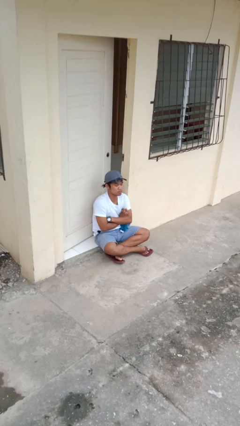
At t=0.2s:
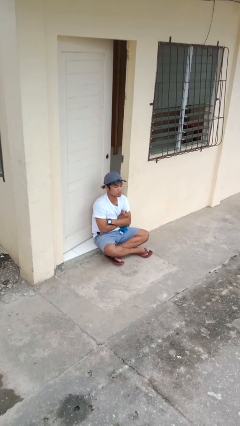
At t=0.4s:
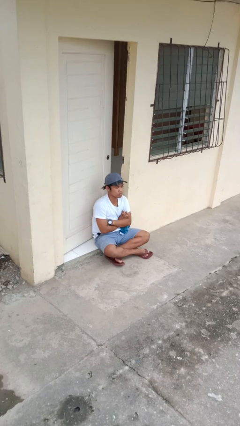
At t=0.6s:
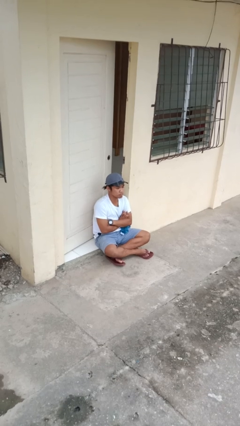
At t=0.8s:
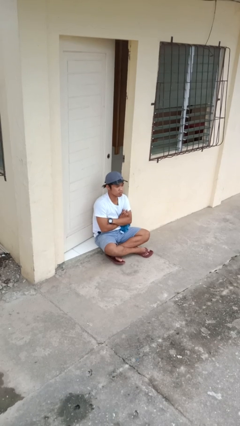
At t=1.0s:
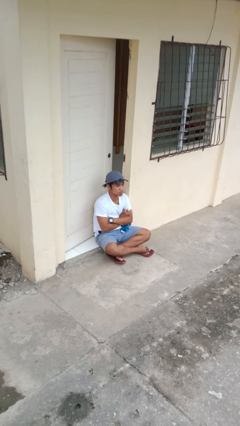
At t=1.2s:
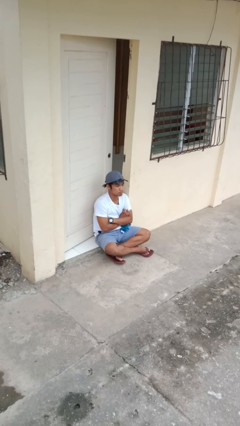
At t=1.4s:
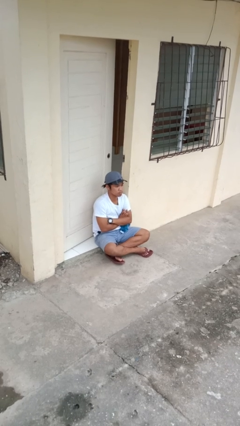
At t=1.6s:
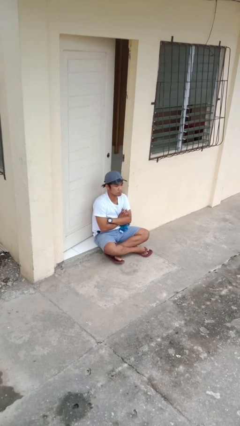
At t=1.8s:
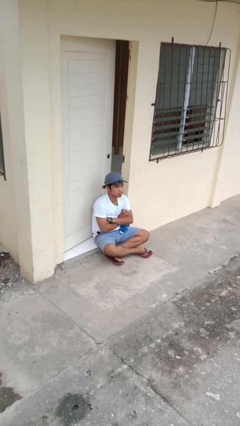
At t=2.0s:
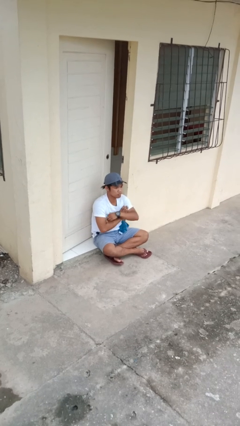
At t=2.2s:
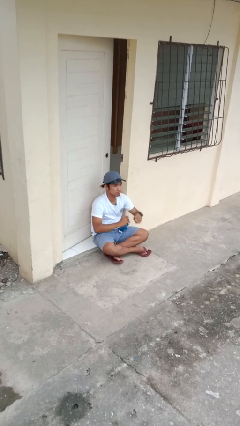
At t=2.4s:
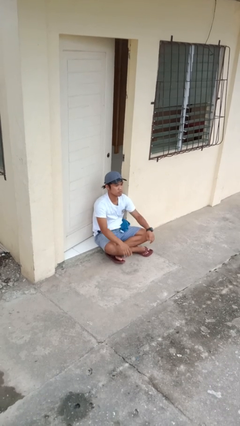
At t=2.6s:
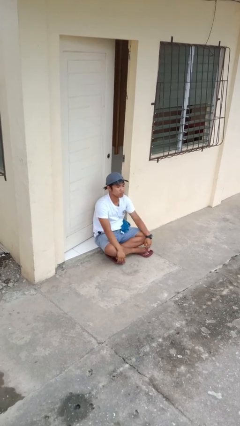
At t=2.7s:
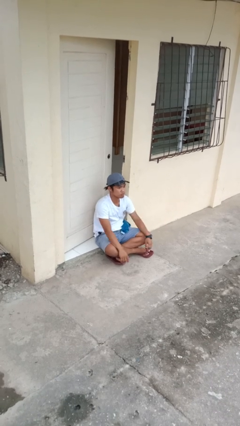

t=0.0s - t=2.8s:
person crosses arms

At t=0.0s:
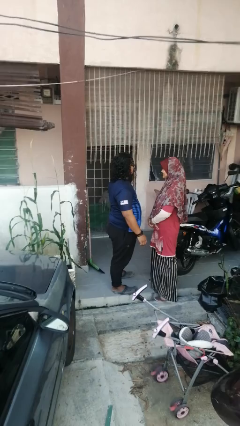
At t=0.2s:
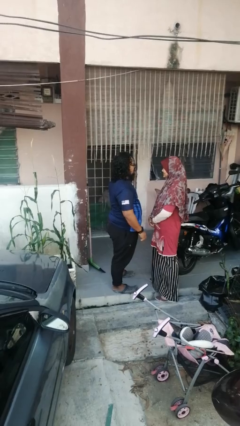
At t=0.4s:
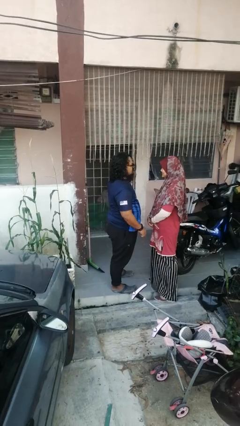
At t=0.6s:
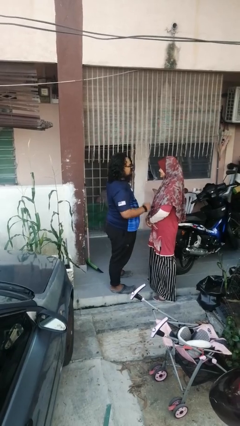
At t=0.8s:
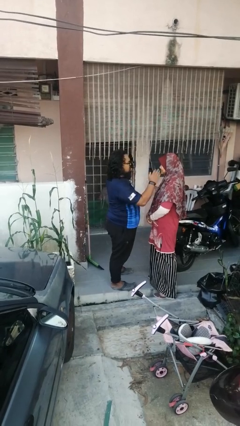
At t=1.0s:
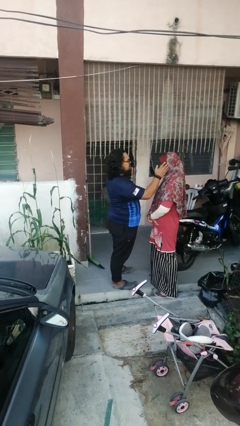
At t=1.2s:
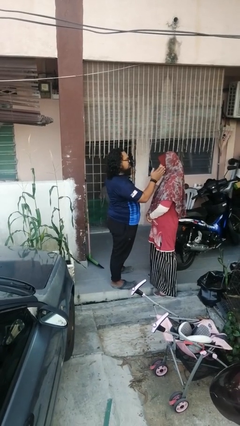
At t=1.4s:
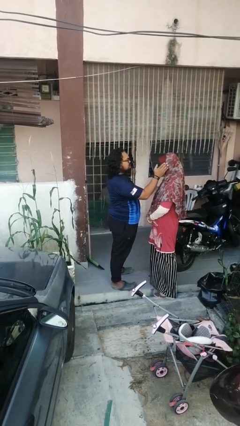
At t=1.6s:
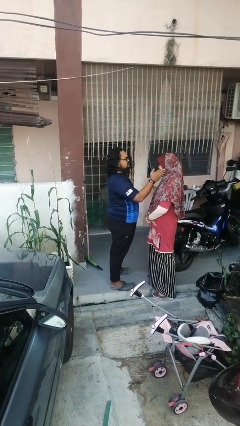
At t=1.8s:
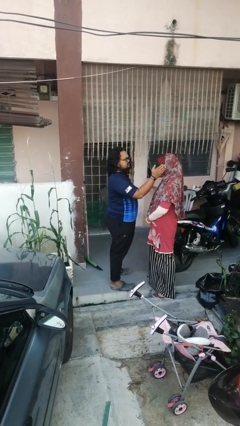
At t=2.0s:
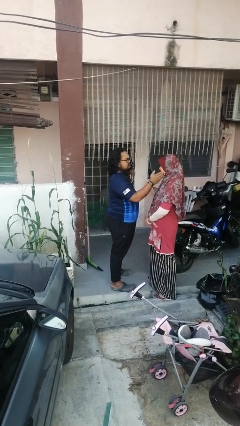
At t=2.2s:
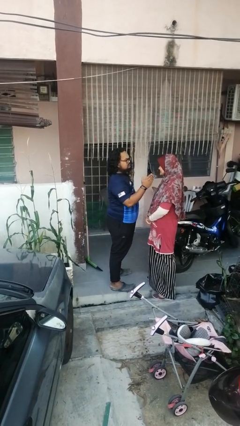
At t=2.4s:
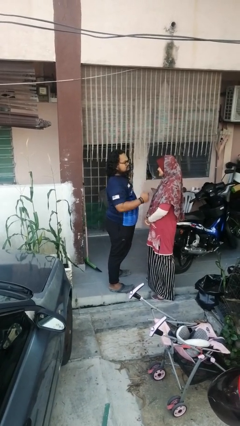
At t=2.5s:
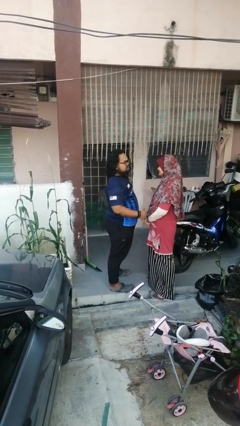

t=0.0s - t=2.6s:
person touches face of person

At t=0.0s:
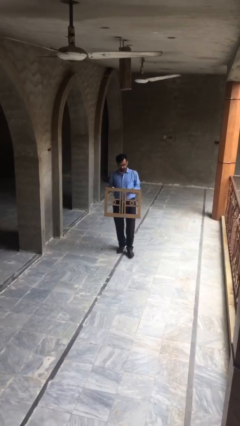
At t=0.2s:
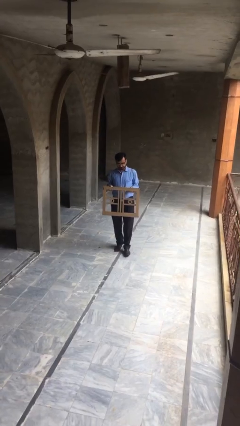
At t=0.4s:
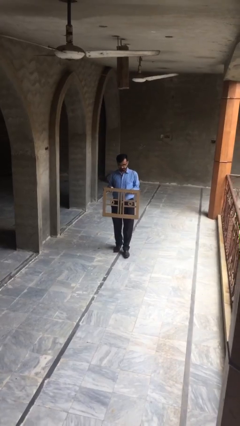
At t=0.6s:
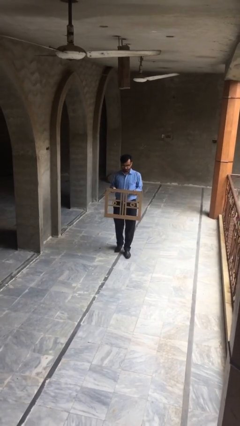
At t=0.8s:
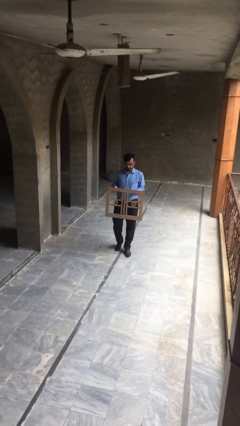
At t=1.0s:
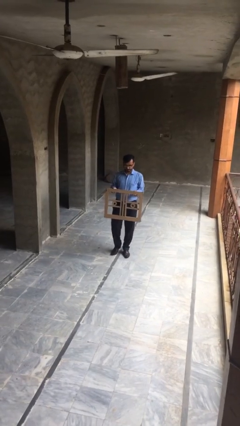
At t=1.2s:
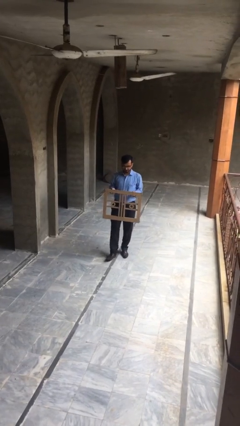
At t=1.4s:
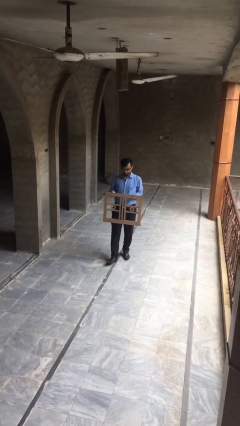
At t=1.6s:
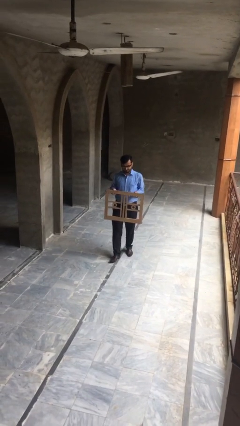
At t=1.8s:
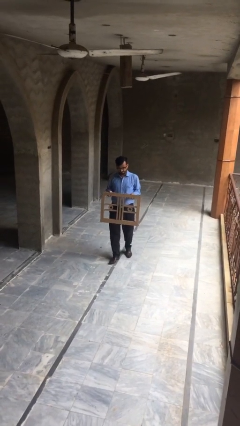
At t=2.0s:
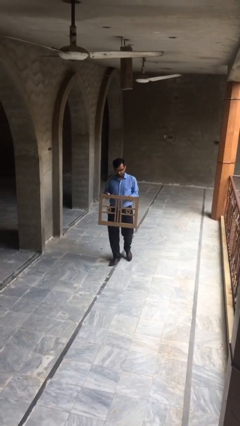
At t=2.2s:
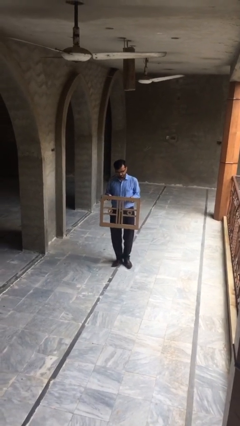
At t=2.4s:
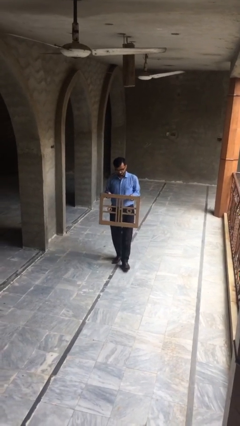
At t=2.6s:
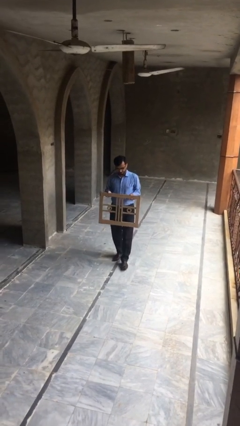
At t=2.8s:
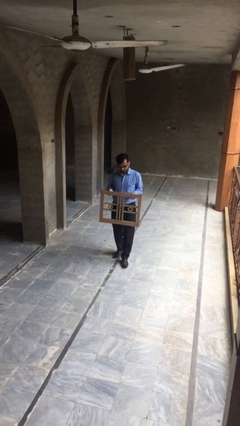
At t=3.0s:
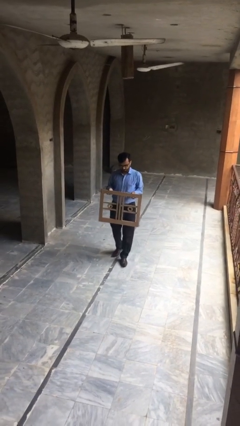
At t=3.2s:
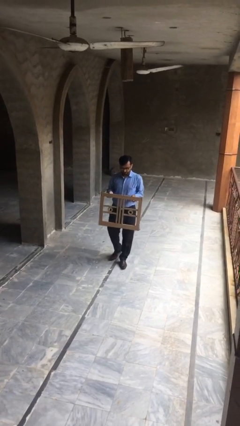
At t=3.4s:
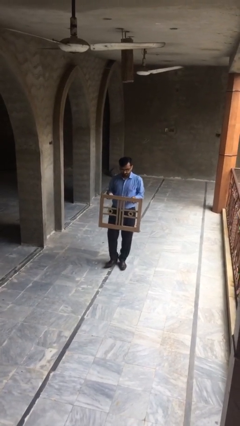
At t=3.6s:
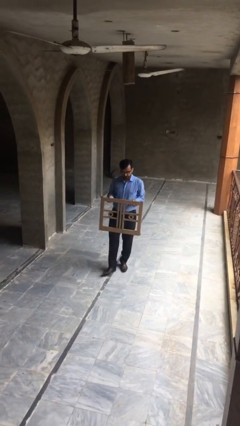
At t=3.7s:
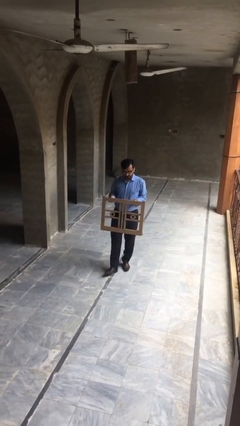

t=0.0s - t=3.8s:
person carries heavy object

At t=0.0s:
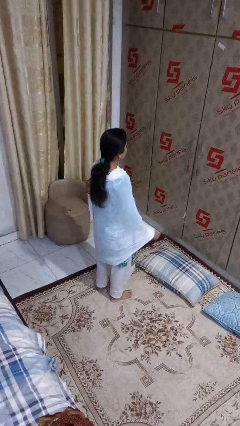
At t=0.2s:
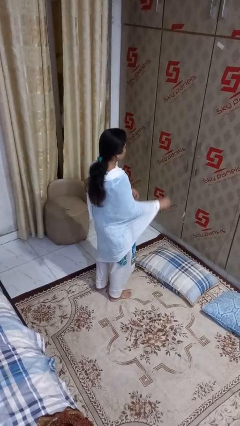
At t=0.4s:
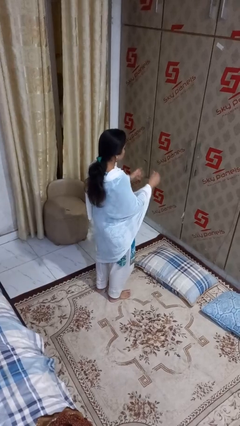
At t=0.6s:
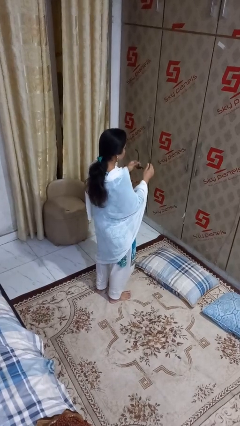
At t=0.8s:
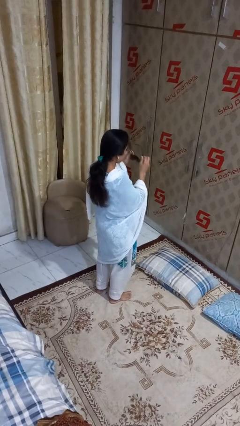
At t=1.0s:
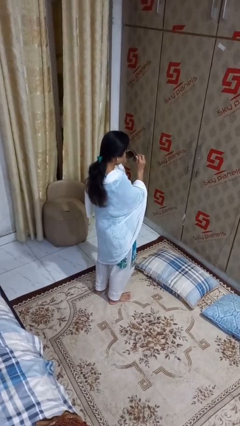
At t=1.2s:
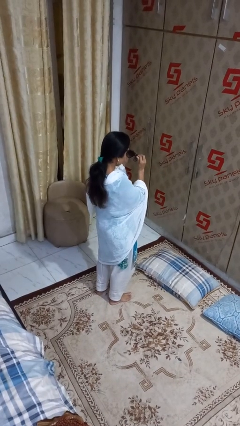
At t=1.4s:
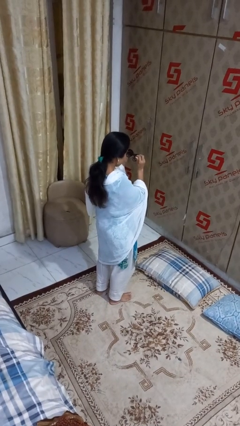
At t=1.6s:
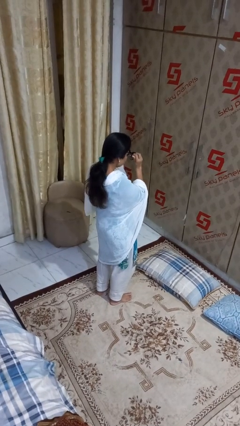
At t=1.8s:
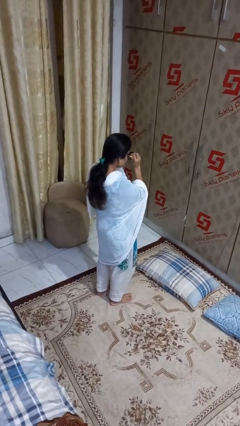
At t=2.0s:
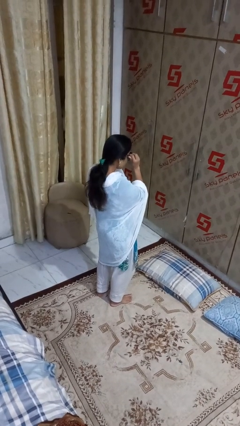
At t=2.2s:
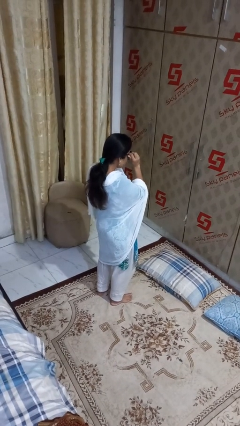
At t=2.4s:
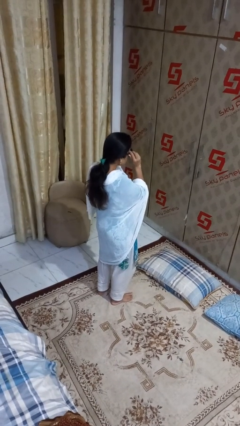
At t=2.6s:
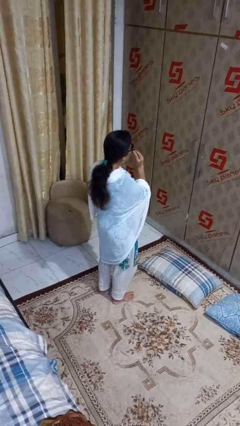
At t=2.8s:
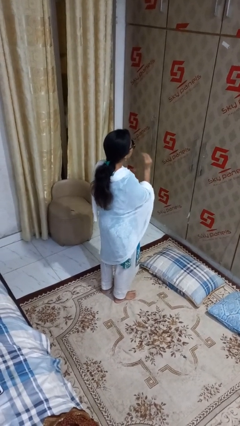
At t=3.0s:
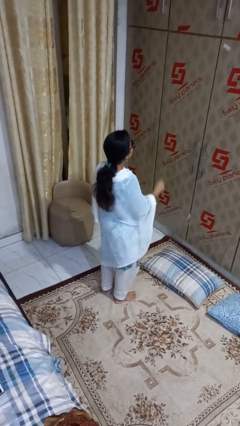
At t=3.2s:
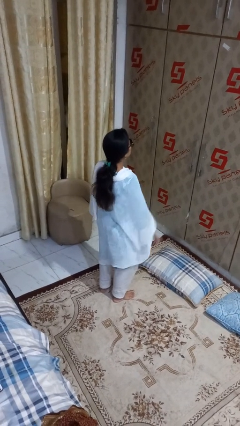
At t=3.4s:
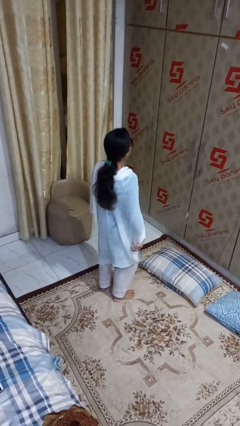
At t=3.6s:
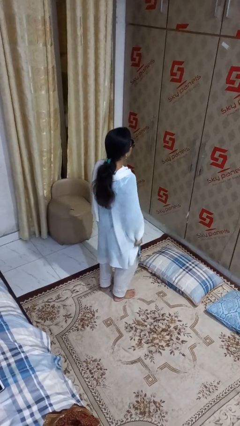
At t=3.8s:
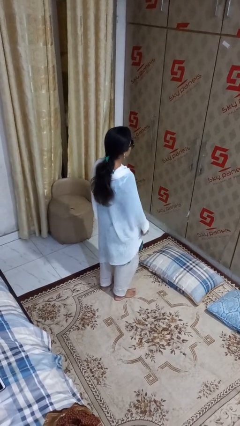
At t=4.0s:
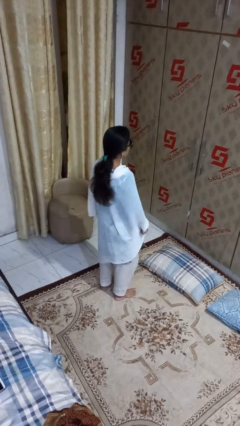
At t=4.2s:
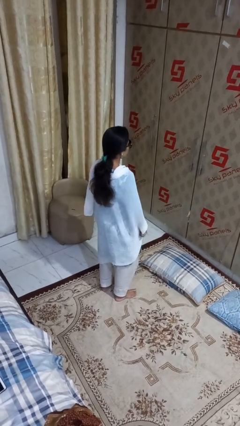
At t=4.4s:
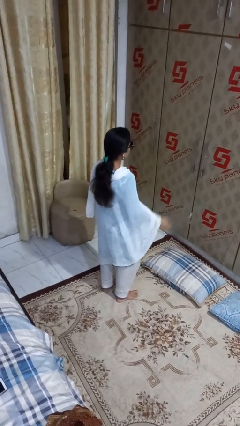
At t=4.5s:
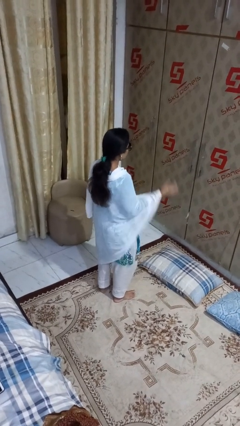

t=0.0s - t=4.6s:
person puts on sunglasses

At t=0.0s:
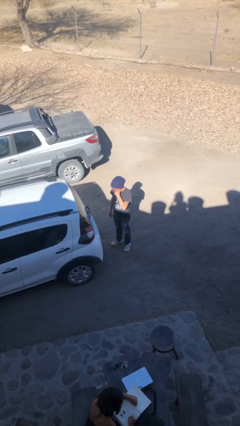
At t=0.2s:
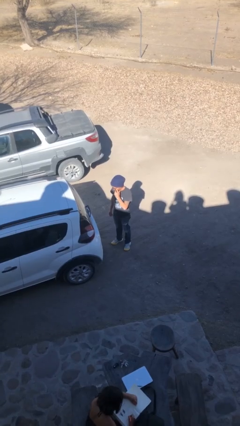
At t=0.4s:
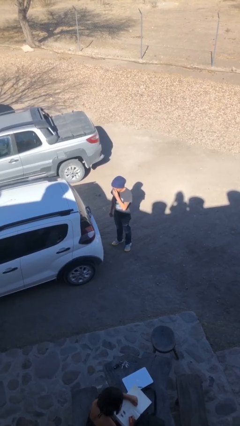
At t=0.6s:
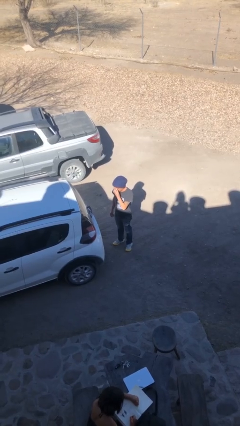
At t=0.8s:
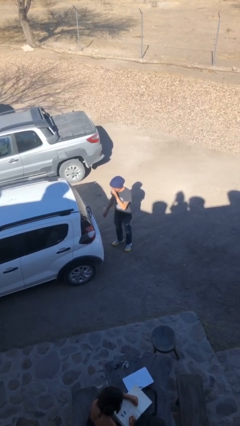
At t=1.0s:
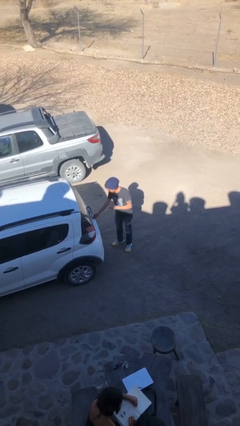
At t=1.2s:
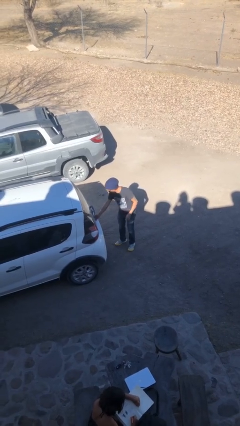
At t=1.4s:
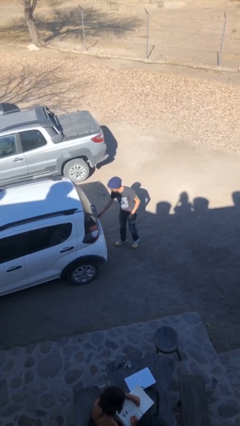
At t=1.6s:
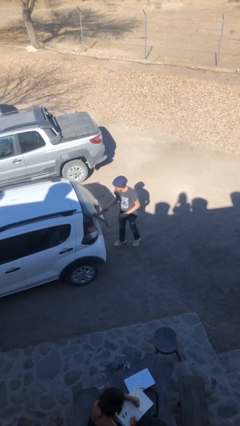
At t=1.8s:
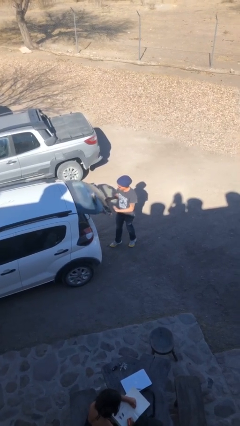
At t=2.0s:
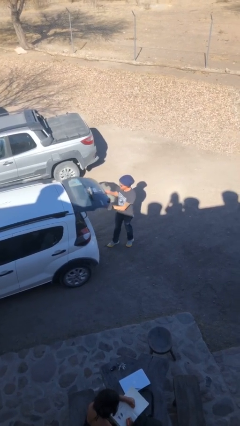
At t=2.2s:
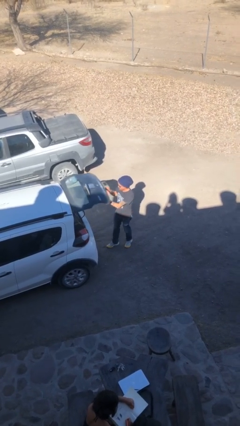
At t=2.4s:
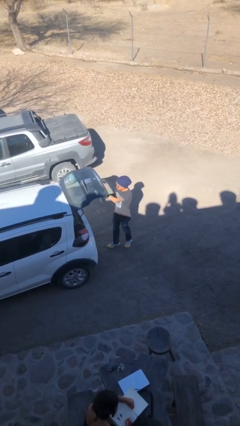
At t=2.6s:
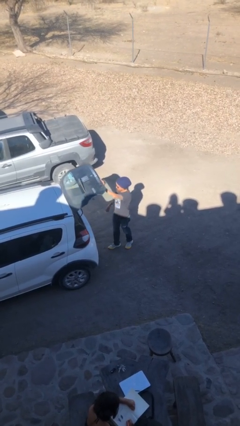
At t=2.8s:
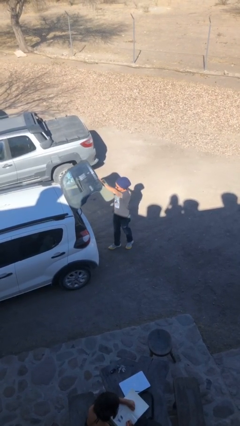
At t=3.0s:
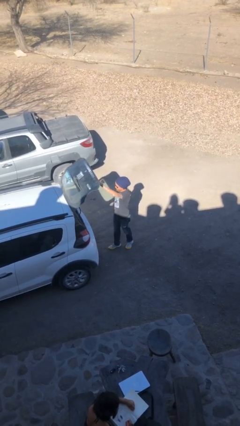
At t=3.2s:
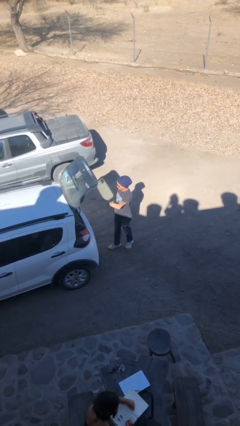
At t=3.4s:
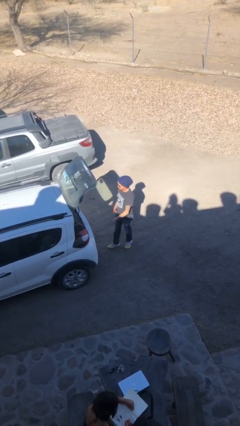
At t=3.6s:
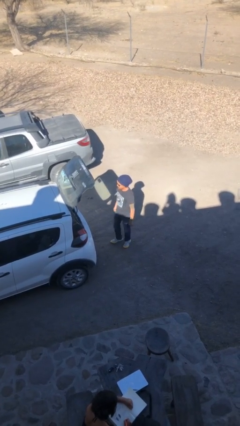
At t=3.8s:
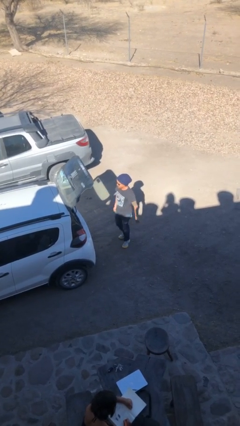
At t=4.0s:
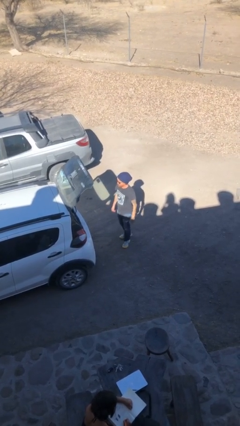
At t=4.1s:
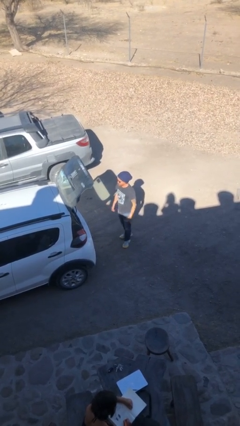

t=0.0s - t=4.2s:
person opens car trunk
